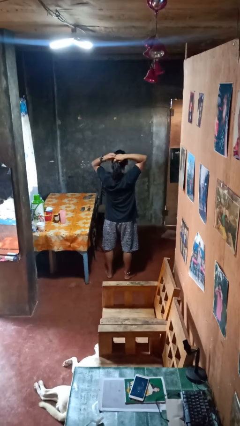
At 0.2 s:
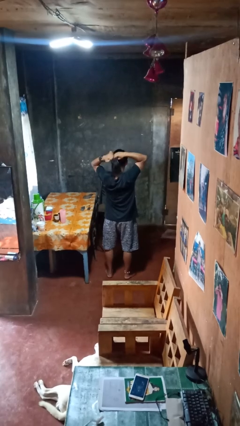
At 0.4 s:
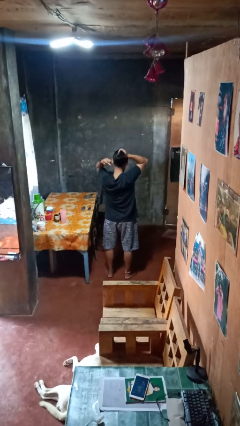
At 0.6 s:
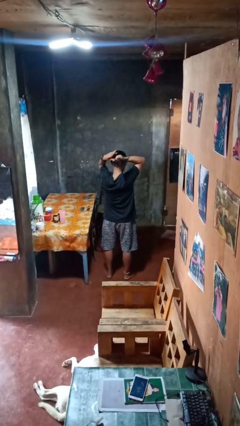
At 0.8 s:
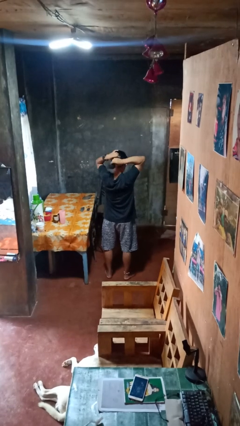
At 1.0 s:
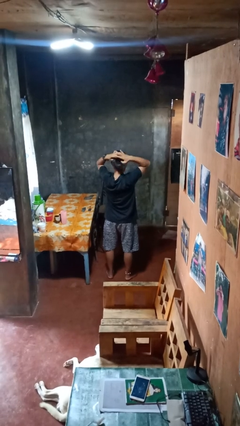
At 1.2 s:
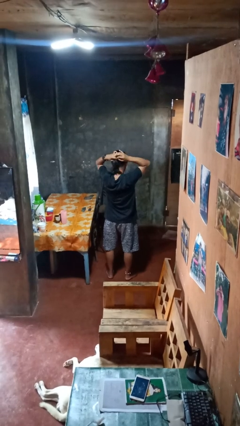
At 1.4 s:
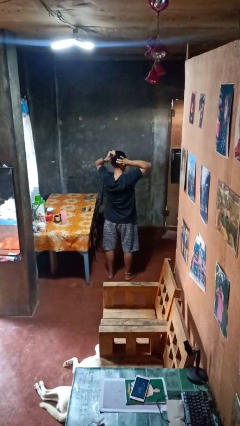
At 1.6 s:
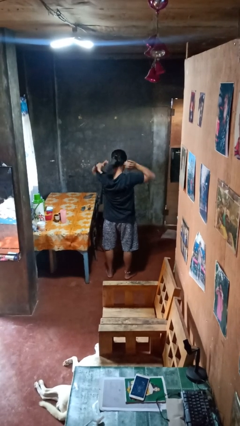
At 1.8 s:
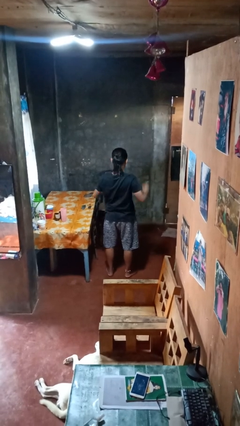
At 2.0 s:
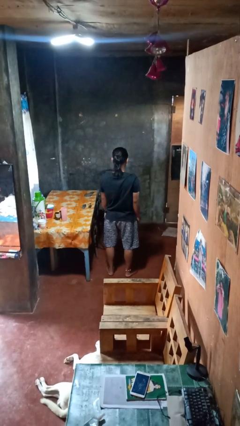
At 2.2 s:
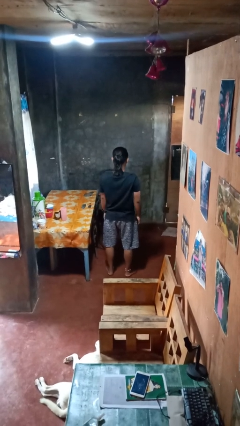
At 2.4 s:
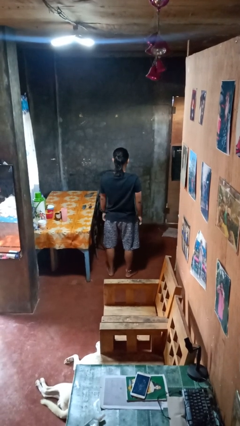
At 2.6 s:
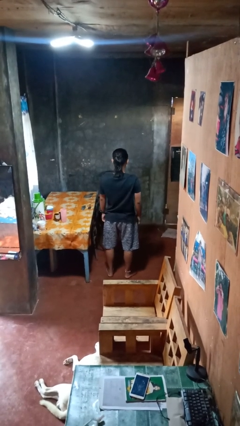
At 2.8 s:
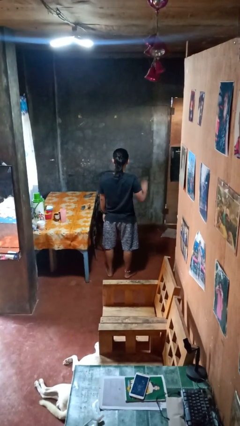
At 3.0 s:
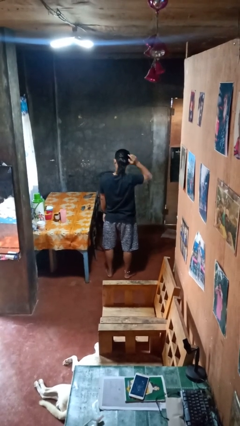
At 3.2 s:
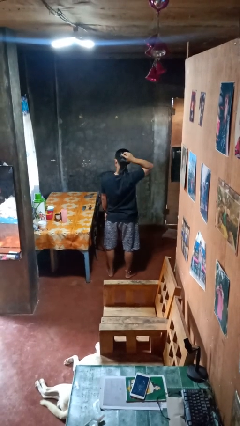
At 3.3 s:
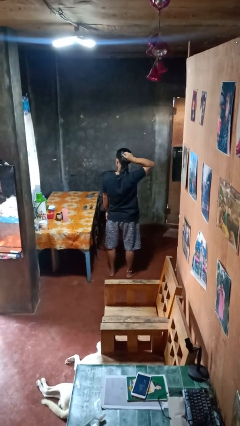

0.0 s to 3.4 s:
person puts hair in ponytail

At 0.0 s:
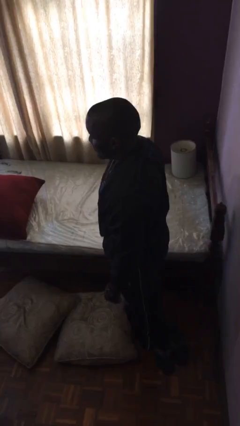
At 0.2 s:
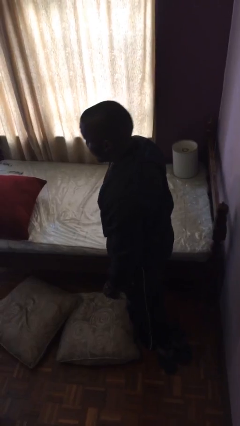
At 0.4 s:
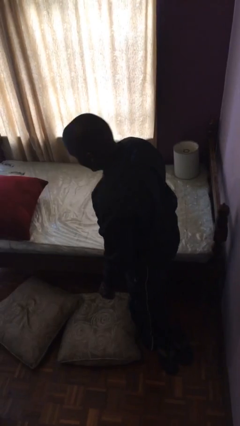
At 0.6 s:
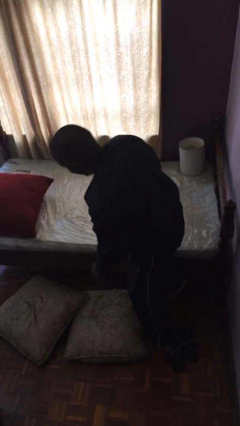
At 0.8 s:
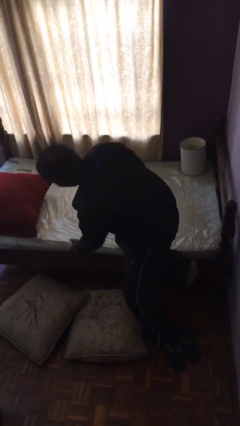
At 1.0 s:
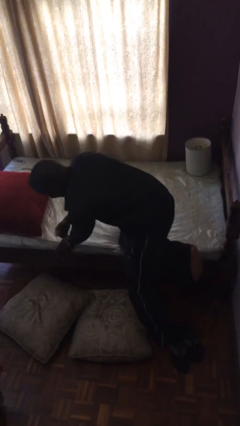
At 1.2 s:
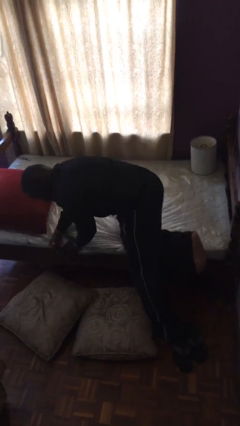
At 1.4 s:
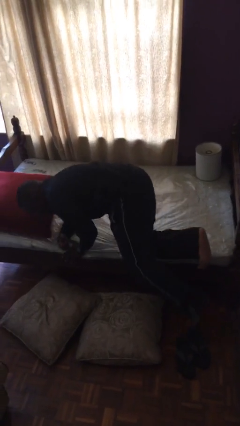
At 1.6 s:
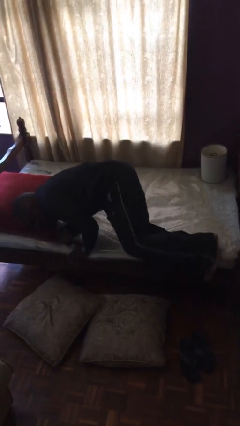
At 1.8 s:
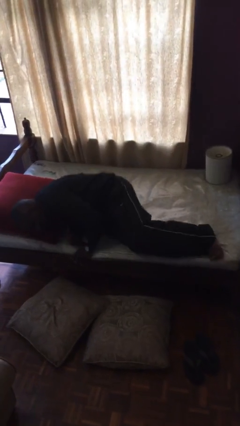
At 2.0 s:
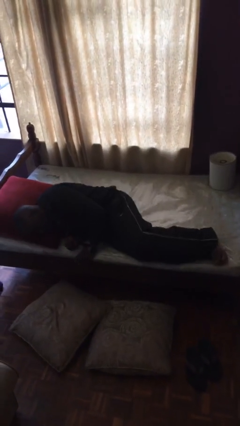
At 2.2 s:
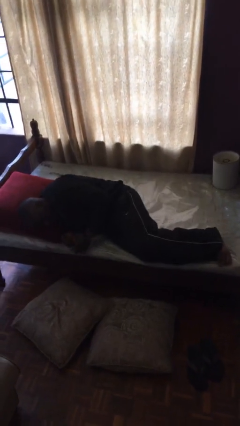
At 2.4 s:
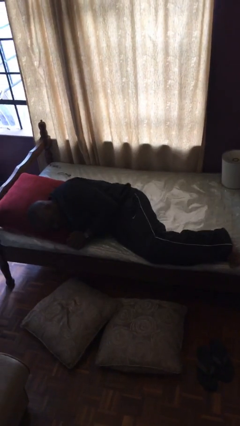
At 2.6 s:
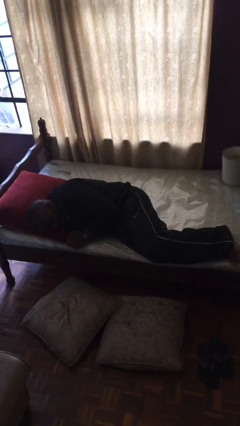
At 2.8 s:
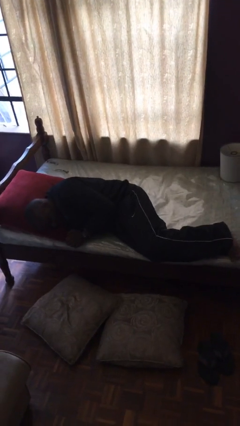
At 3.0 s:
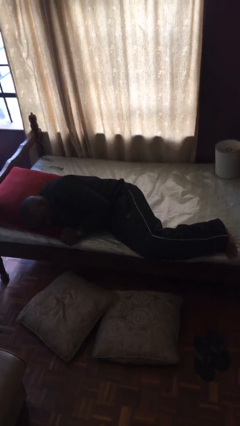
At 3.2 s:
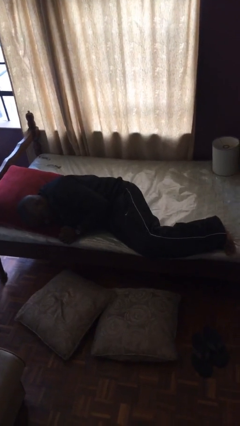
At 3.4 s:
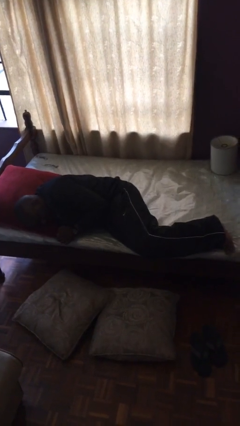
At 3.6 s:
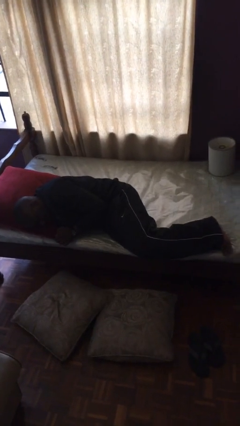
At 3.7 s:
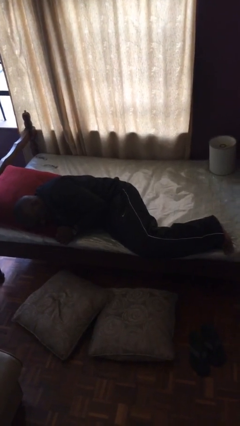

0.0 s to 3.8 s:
person lies down on bed

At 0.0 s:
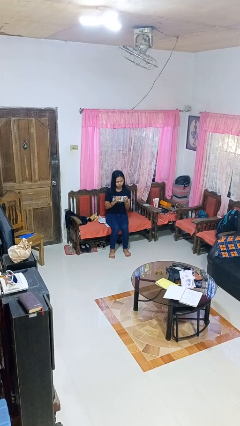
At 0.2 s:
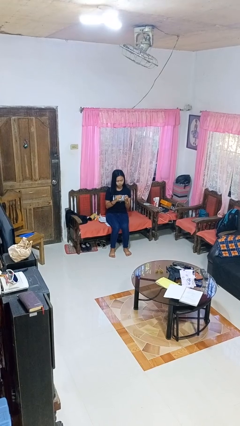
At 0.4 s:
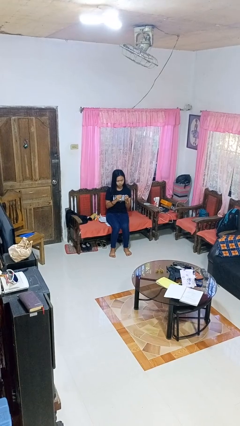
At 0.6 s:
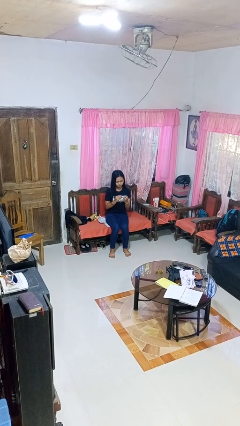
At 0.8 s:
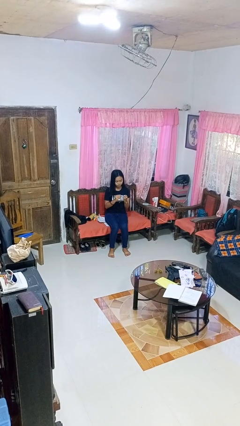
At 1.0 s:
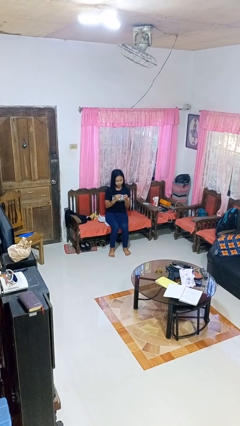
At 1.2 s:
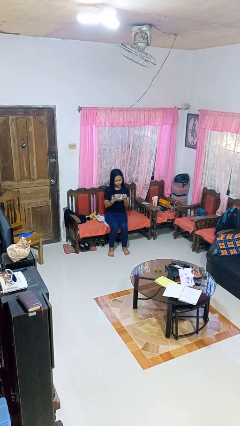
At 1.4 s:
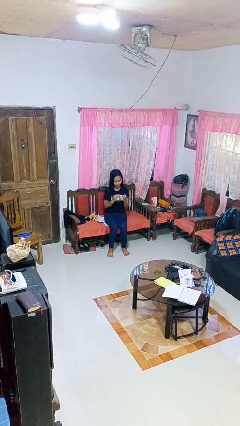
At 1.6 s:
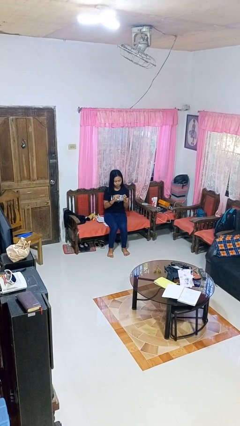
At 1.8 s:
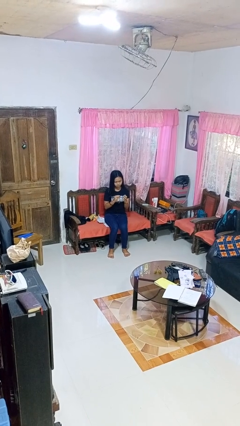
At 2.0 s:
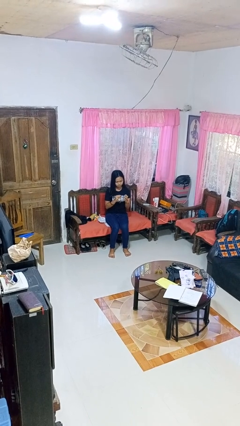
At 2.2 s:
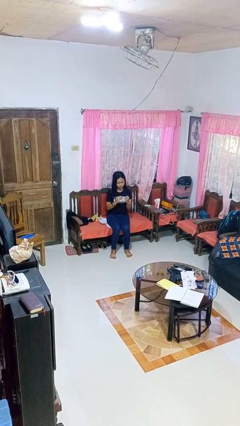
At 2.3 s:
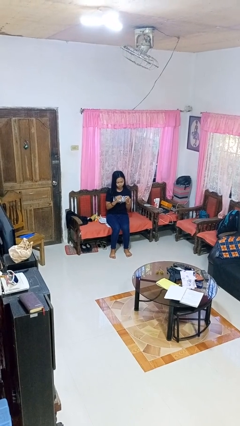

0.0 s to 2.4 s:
person clips fingernails

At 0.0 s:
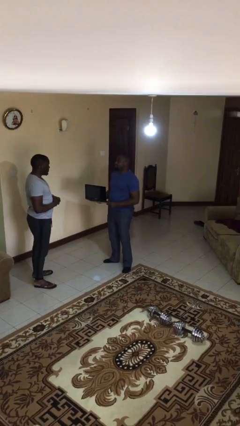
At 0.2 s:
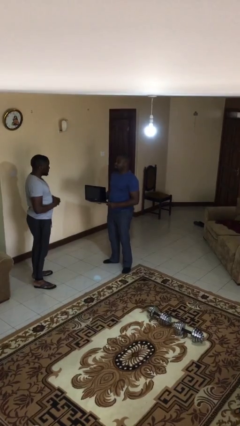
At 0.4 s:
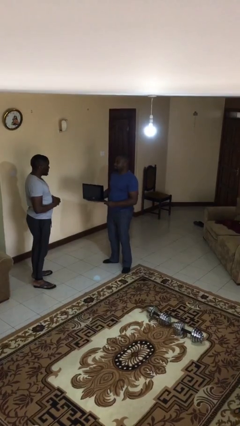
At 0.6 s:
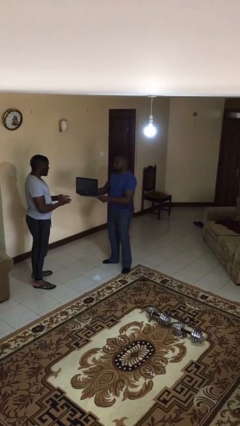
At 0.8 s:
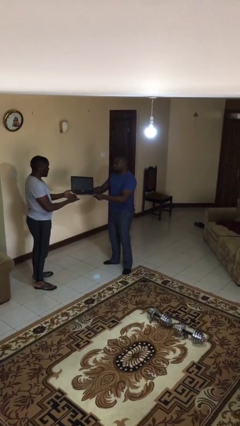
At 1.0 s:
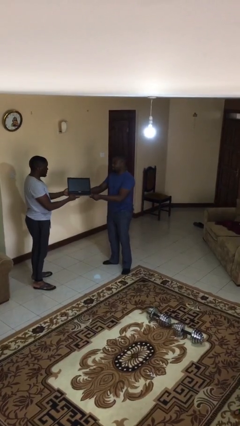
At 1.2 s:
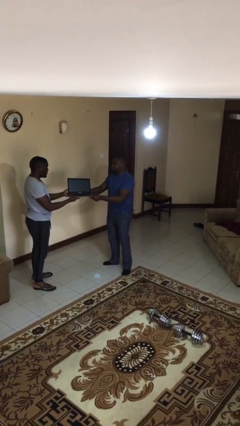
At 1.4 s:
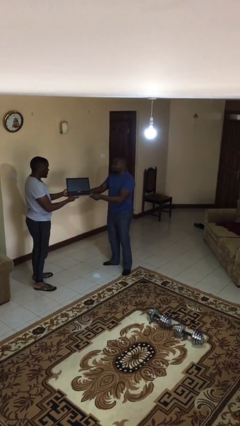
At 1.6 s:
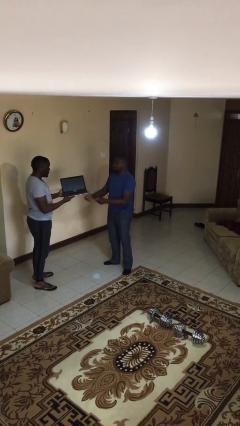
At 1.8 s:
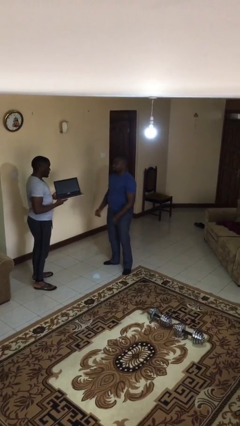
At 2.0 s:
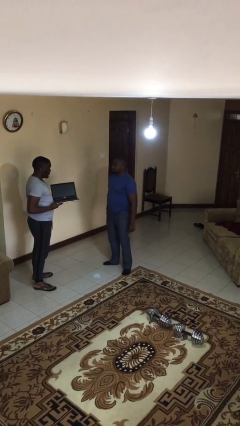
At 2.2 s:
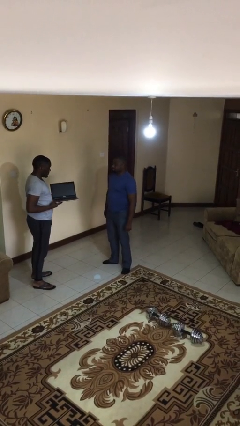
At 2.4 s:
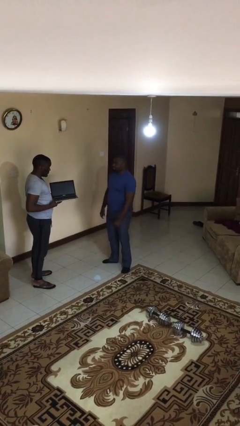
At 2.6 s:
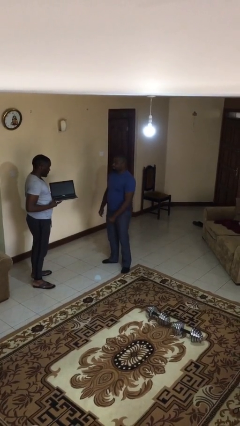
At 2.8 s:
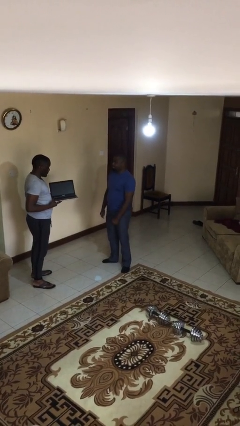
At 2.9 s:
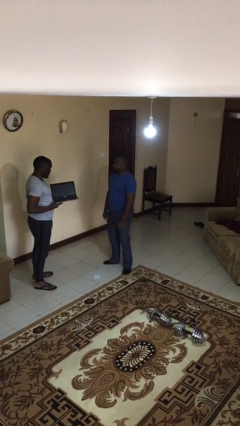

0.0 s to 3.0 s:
person transfers object to person

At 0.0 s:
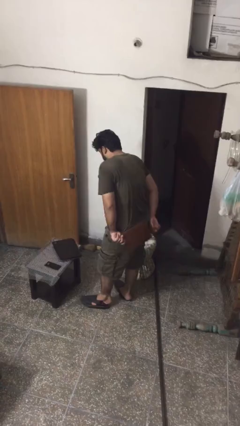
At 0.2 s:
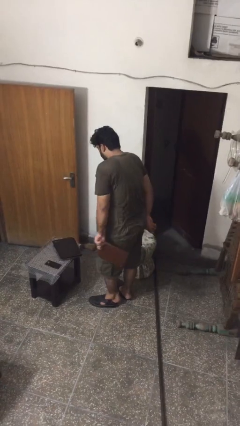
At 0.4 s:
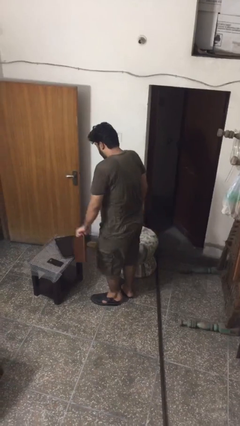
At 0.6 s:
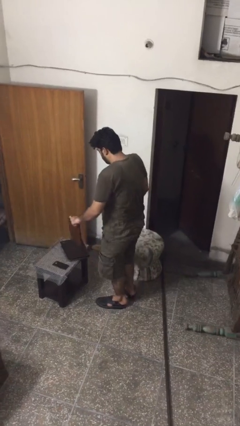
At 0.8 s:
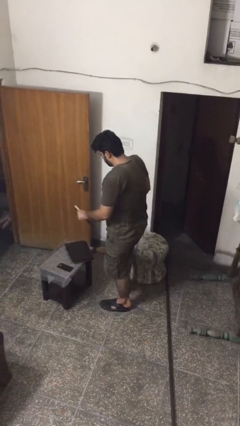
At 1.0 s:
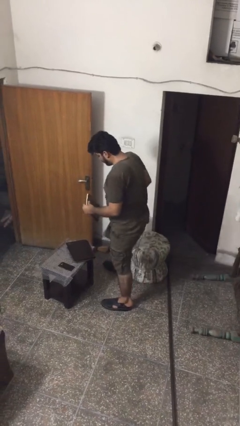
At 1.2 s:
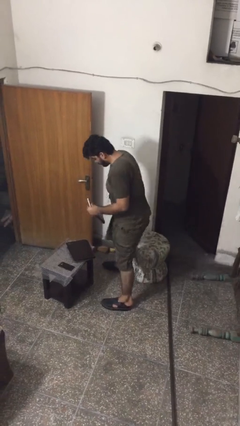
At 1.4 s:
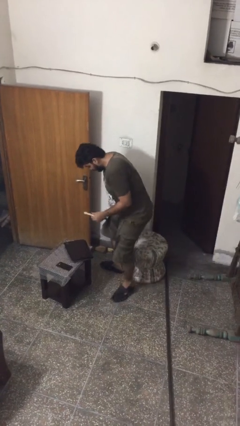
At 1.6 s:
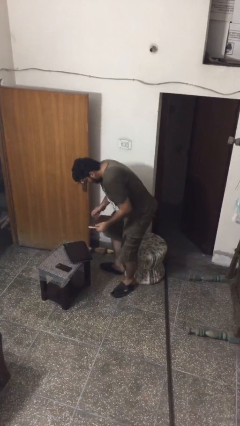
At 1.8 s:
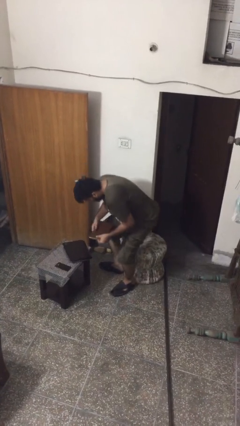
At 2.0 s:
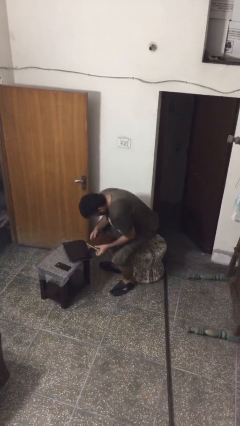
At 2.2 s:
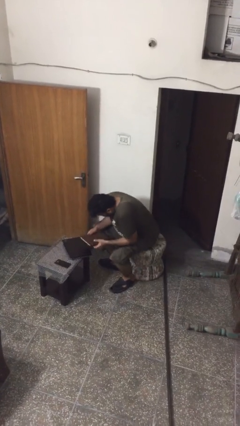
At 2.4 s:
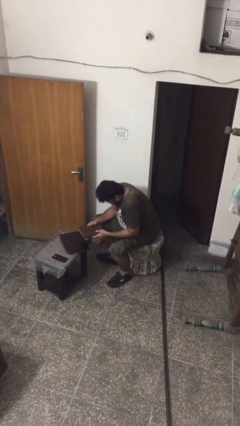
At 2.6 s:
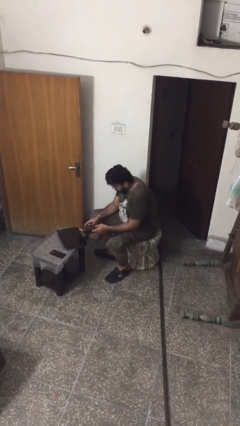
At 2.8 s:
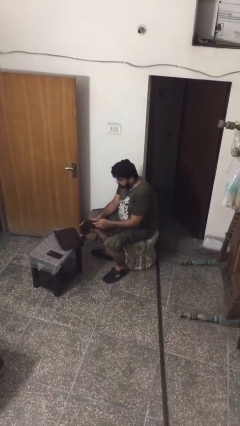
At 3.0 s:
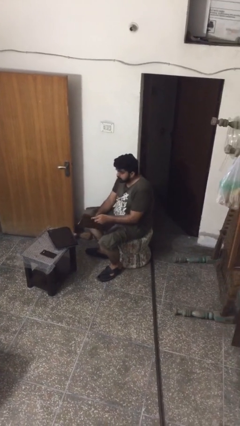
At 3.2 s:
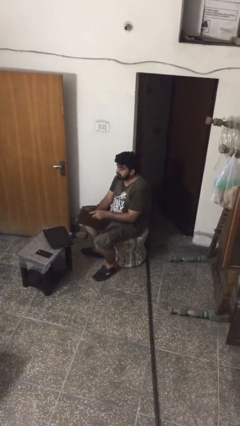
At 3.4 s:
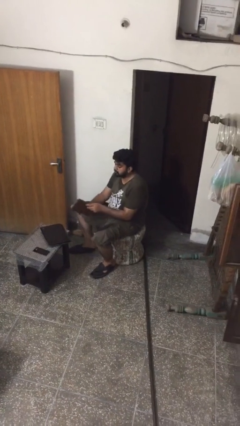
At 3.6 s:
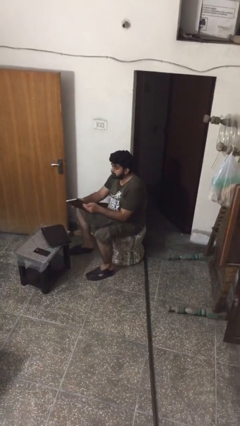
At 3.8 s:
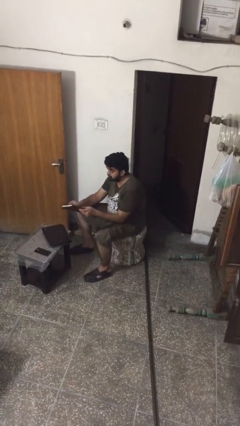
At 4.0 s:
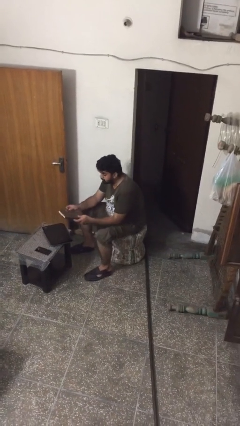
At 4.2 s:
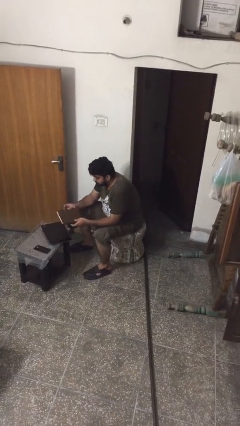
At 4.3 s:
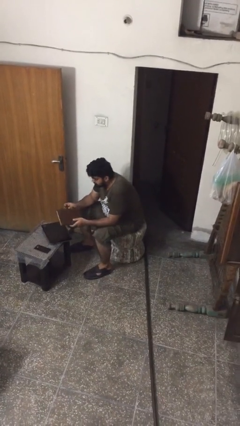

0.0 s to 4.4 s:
person sits down
